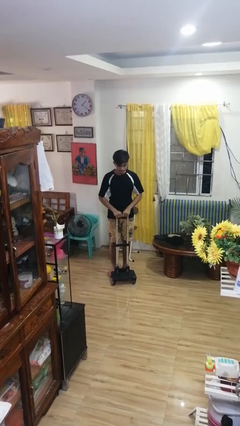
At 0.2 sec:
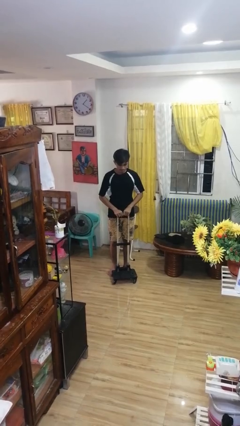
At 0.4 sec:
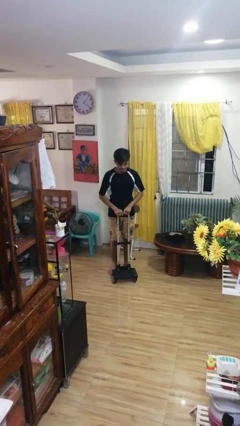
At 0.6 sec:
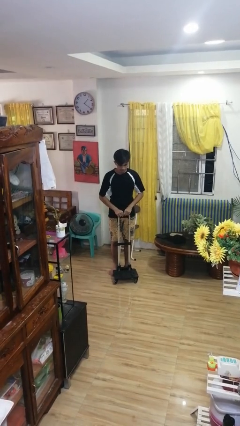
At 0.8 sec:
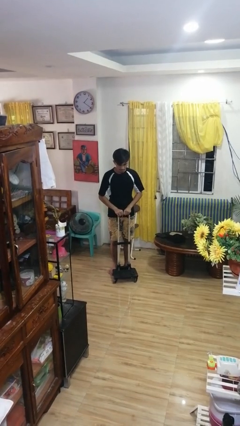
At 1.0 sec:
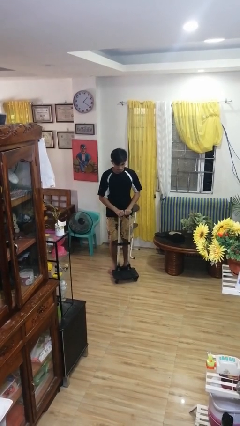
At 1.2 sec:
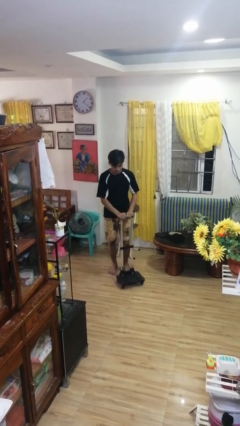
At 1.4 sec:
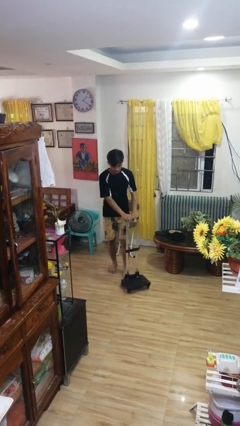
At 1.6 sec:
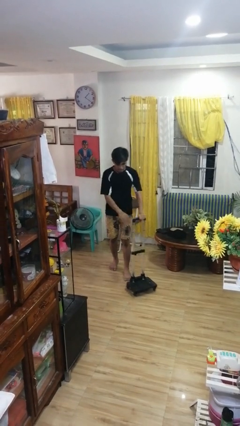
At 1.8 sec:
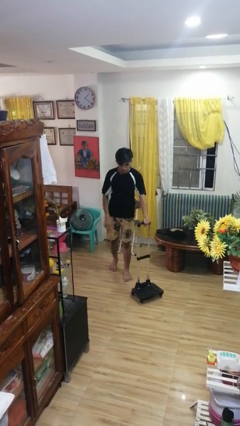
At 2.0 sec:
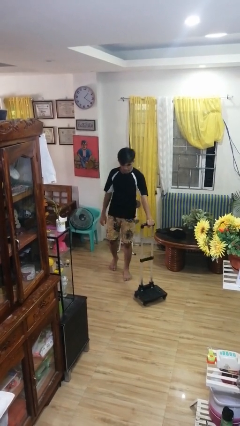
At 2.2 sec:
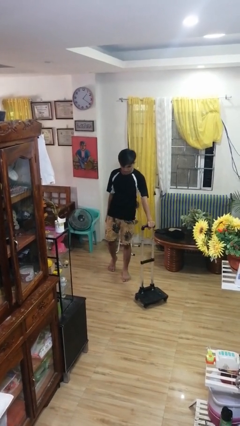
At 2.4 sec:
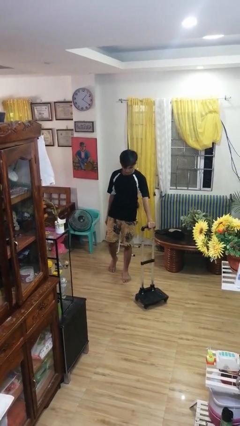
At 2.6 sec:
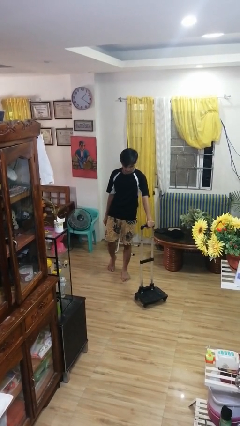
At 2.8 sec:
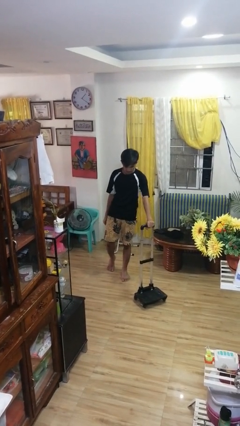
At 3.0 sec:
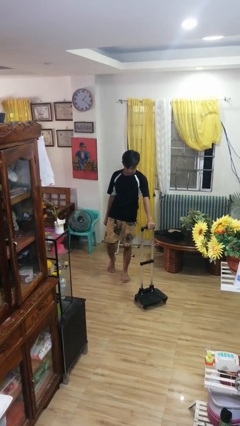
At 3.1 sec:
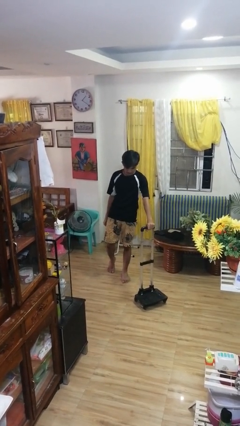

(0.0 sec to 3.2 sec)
person pushes wheeled cart

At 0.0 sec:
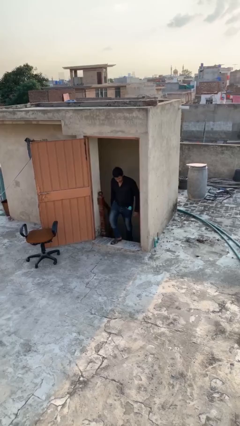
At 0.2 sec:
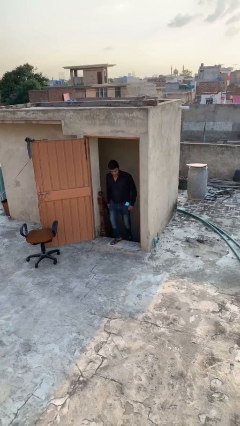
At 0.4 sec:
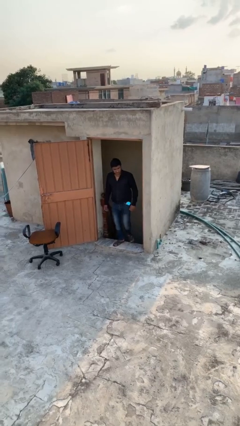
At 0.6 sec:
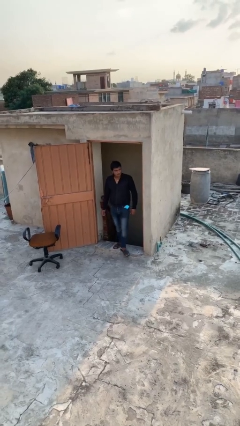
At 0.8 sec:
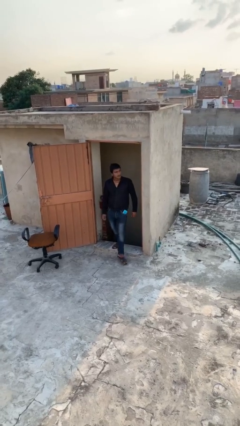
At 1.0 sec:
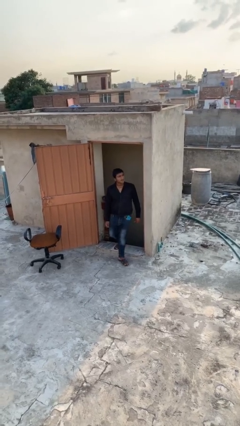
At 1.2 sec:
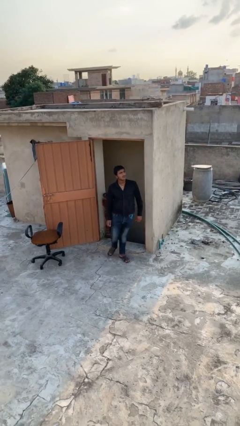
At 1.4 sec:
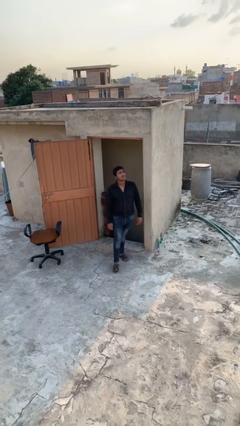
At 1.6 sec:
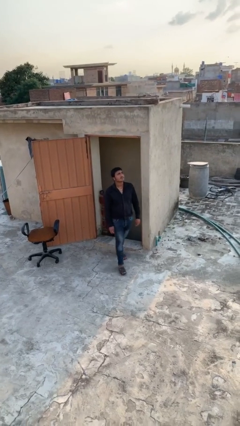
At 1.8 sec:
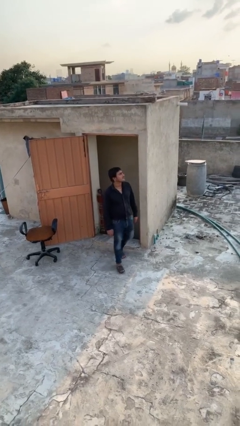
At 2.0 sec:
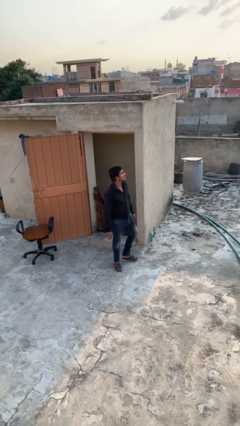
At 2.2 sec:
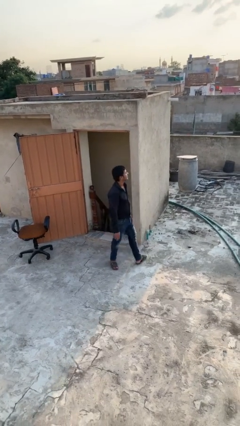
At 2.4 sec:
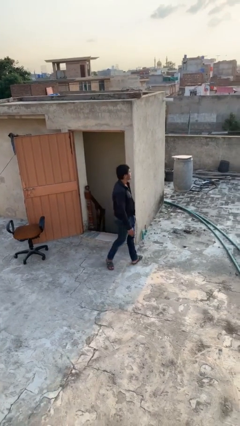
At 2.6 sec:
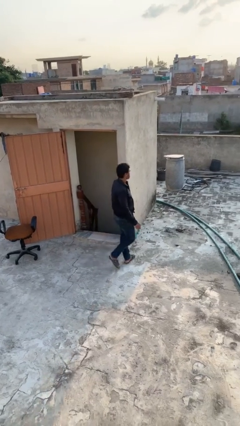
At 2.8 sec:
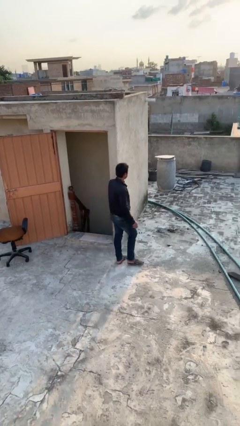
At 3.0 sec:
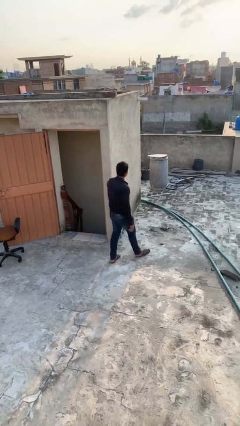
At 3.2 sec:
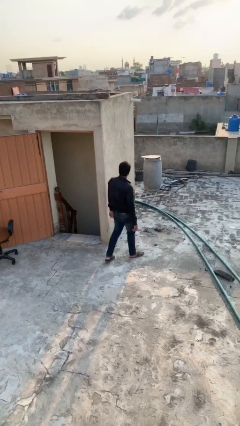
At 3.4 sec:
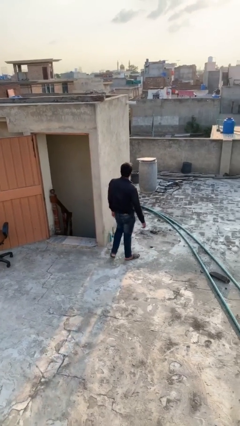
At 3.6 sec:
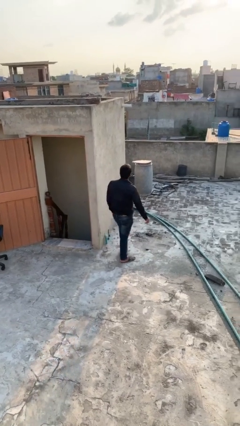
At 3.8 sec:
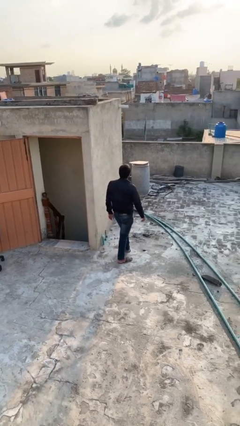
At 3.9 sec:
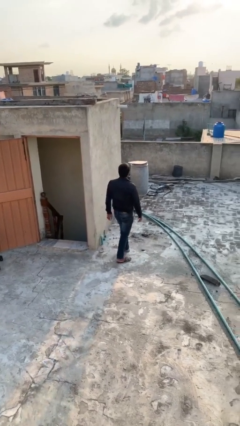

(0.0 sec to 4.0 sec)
person enters scene through structure

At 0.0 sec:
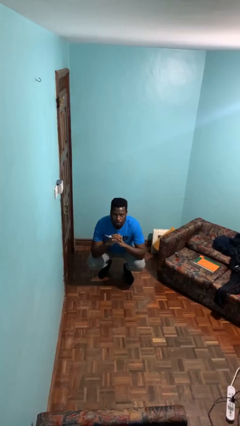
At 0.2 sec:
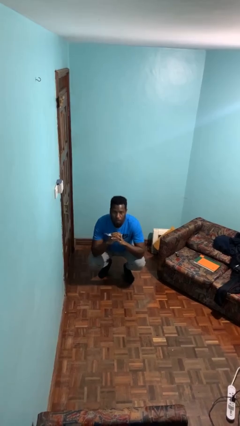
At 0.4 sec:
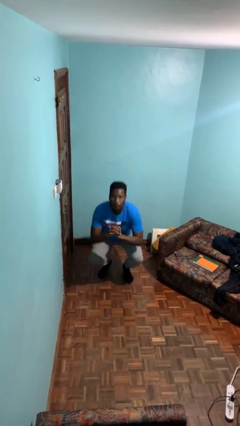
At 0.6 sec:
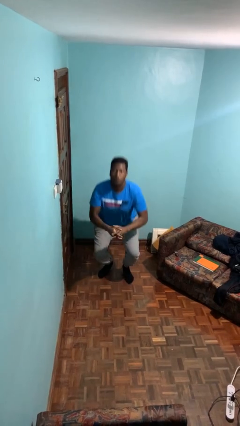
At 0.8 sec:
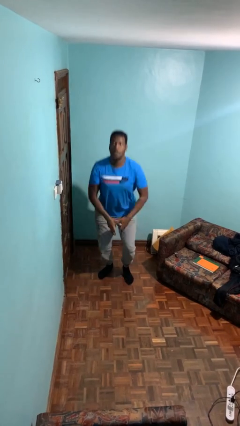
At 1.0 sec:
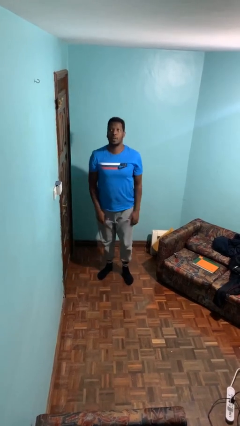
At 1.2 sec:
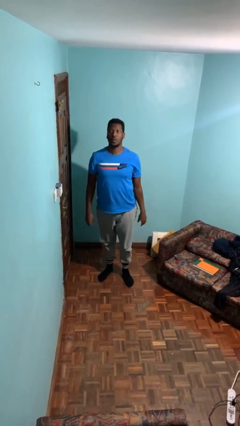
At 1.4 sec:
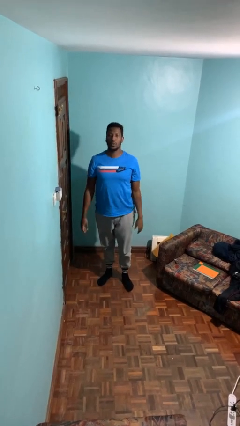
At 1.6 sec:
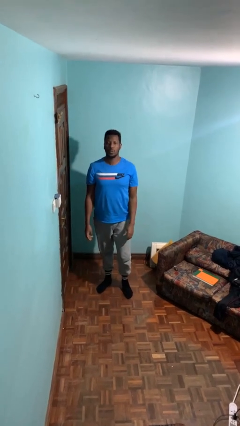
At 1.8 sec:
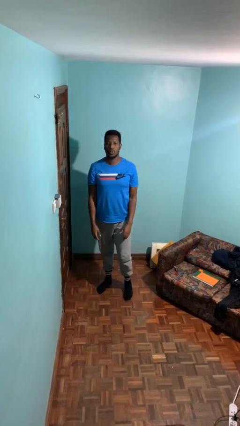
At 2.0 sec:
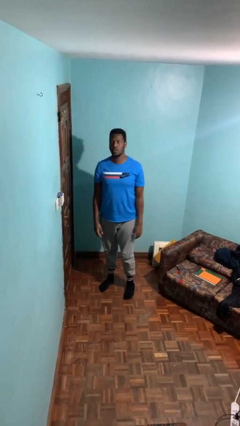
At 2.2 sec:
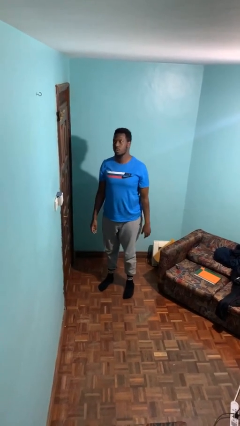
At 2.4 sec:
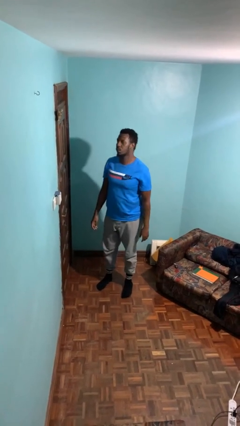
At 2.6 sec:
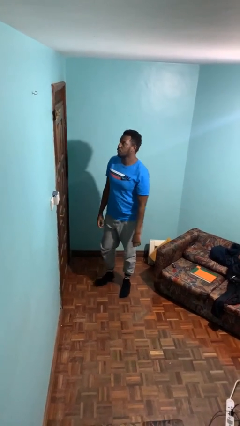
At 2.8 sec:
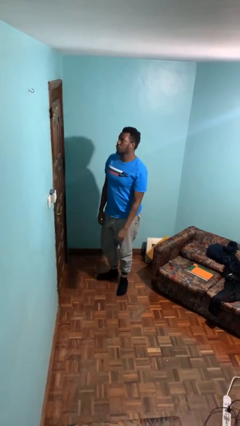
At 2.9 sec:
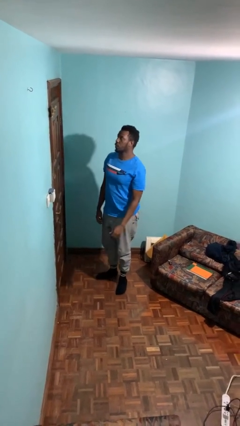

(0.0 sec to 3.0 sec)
person stands up

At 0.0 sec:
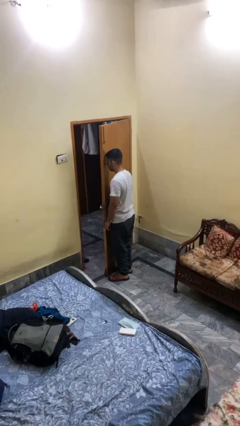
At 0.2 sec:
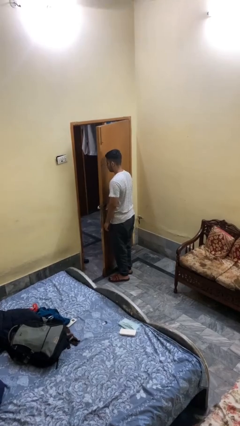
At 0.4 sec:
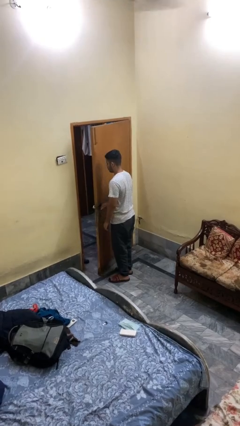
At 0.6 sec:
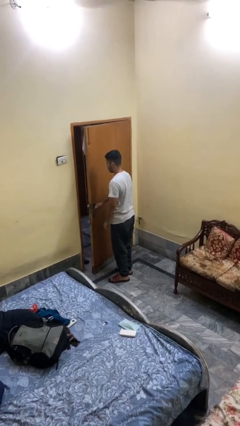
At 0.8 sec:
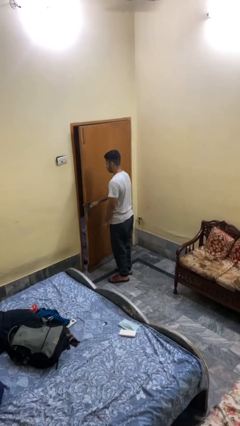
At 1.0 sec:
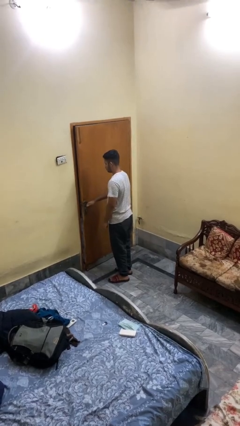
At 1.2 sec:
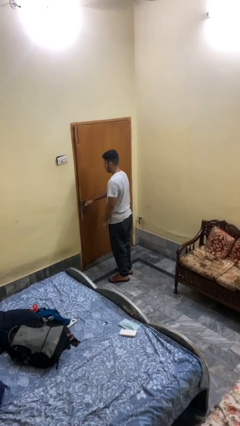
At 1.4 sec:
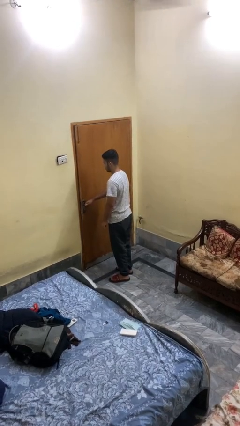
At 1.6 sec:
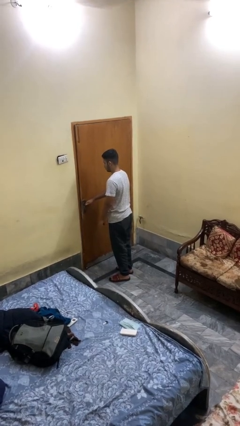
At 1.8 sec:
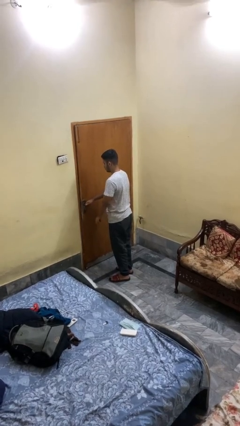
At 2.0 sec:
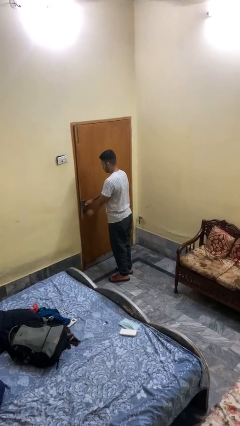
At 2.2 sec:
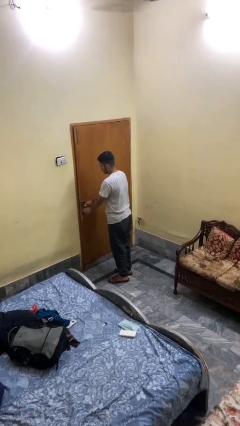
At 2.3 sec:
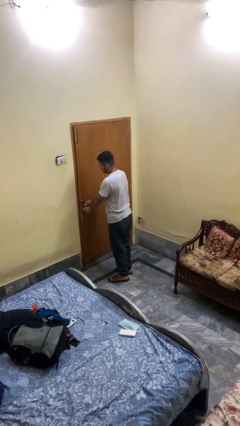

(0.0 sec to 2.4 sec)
person closes facility door

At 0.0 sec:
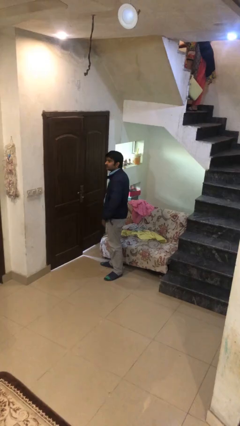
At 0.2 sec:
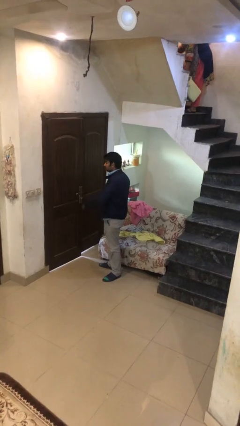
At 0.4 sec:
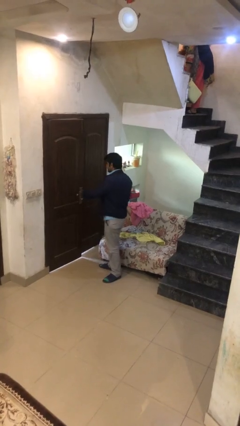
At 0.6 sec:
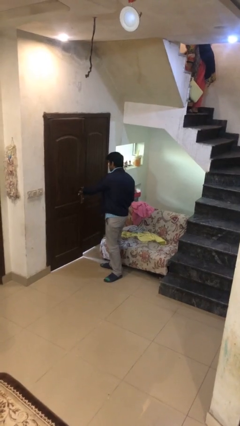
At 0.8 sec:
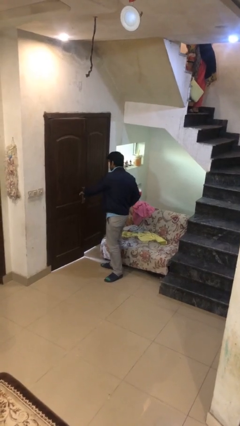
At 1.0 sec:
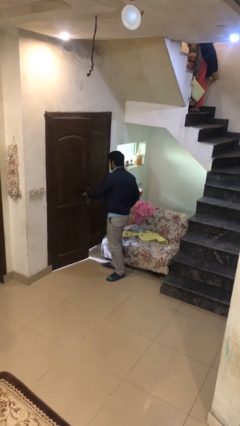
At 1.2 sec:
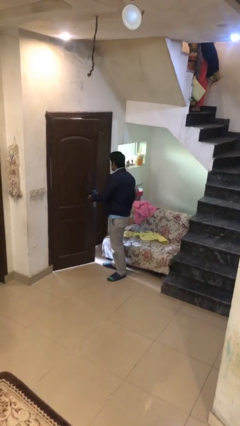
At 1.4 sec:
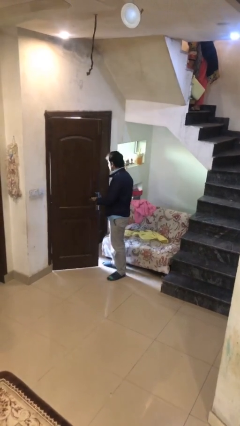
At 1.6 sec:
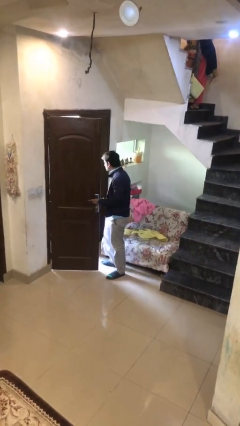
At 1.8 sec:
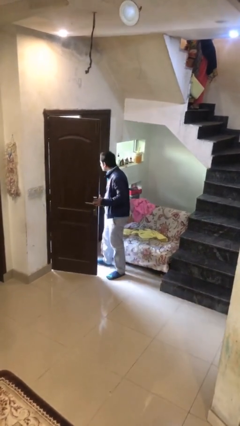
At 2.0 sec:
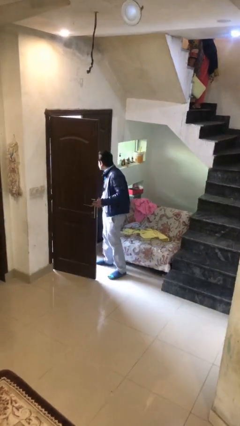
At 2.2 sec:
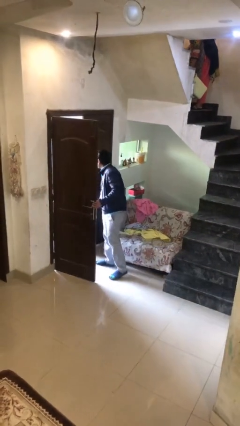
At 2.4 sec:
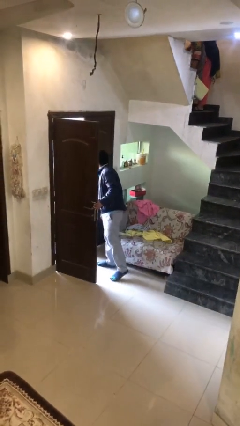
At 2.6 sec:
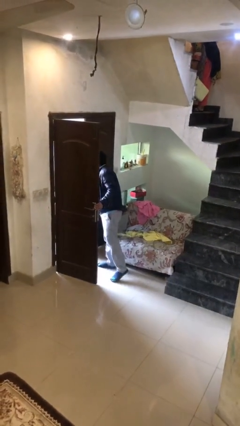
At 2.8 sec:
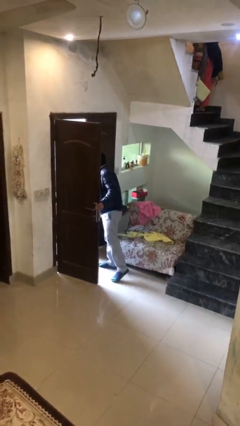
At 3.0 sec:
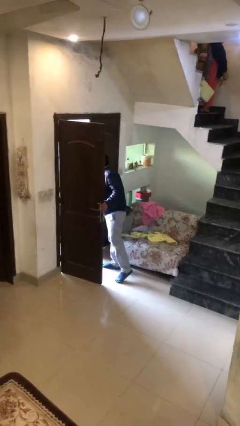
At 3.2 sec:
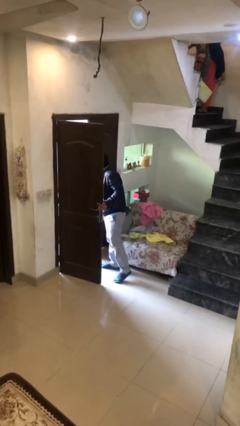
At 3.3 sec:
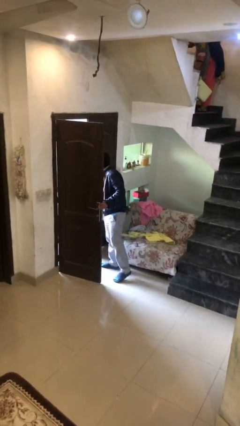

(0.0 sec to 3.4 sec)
person opens facility door

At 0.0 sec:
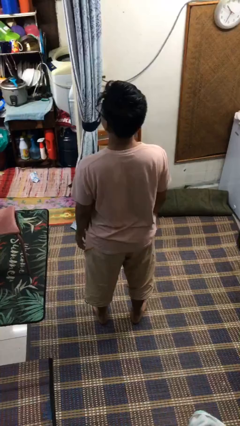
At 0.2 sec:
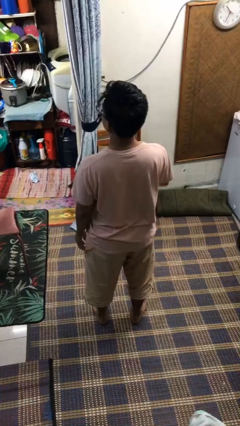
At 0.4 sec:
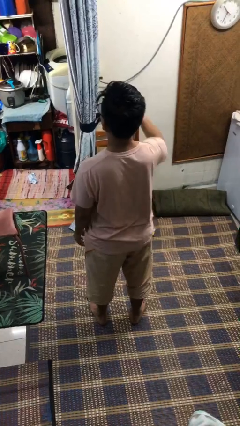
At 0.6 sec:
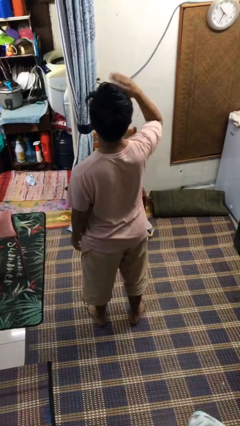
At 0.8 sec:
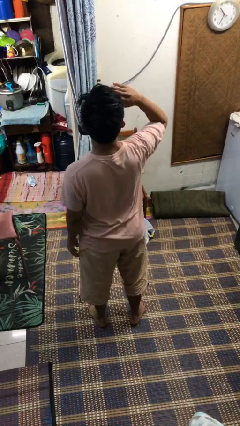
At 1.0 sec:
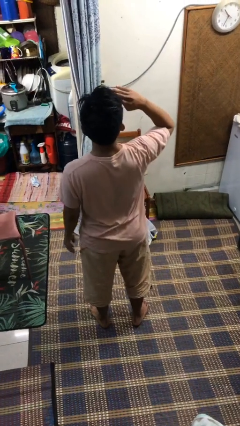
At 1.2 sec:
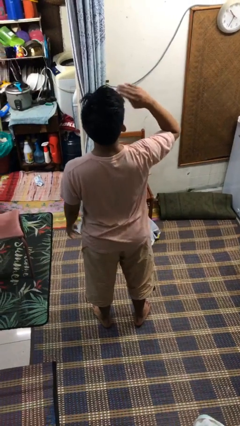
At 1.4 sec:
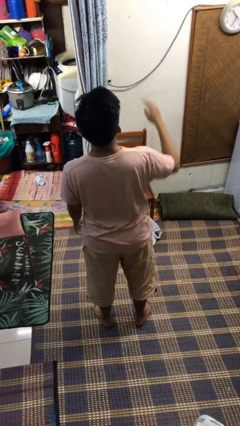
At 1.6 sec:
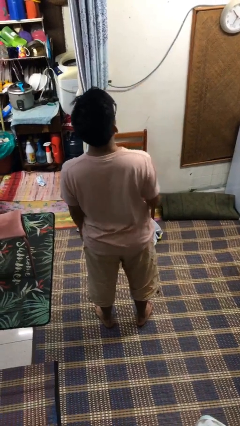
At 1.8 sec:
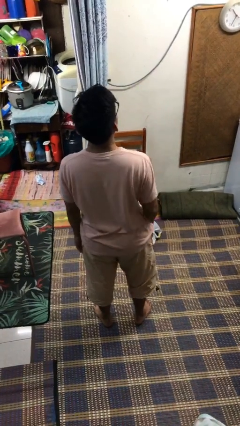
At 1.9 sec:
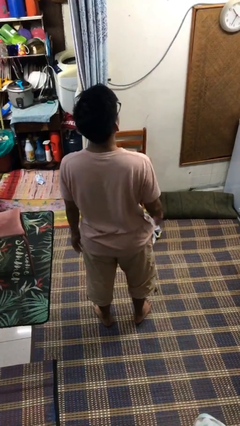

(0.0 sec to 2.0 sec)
person salutes
